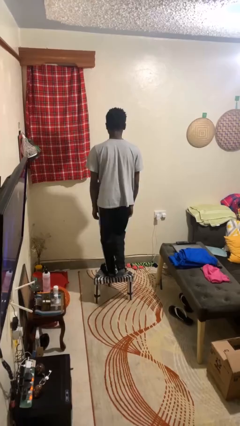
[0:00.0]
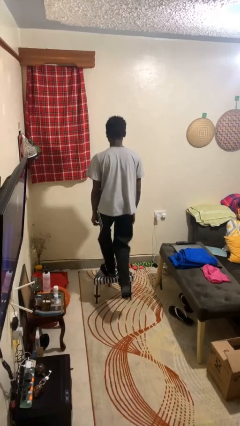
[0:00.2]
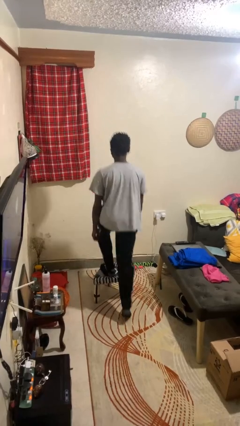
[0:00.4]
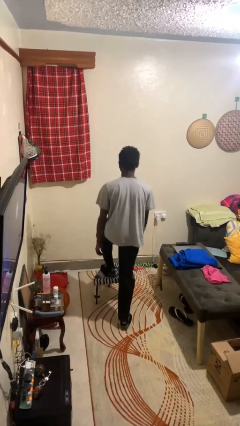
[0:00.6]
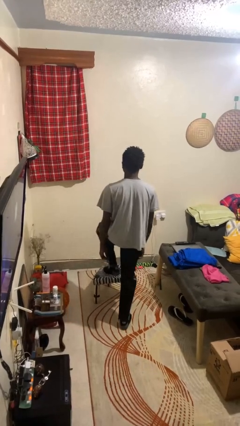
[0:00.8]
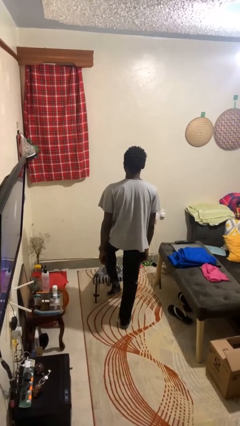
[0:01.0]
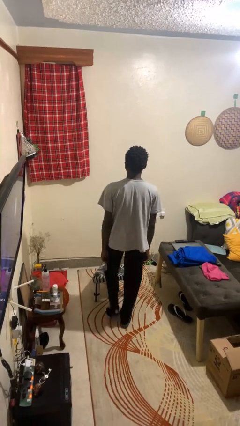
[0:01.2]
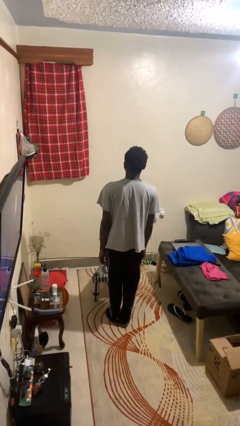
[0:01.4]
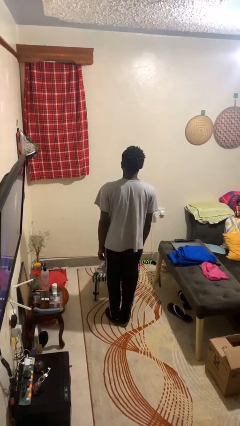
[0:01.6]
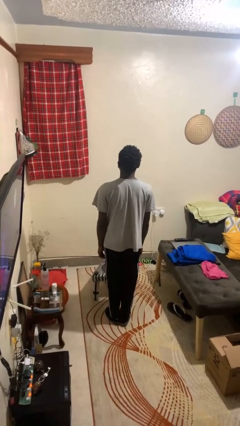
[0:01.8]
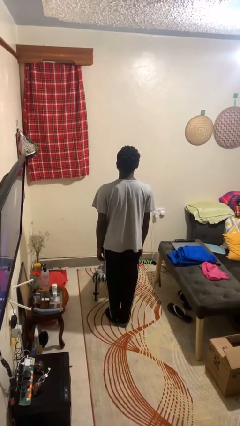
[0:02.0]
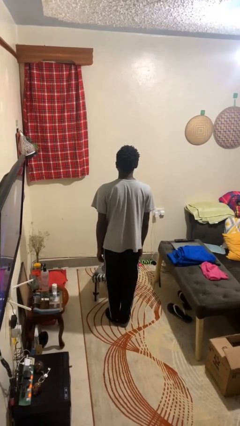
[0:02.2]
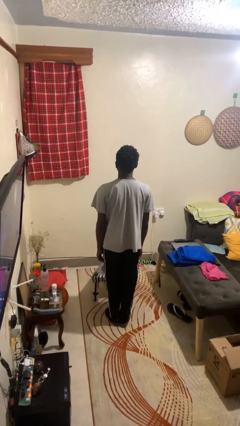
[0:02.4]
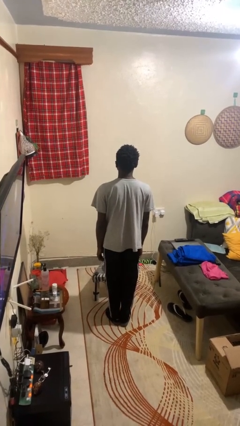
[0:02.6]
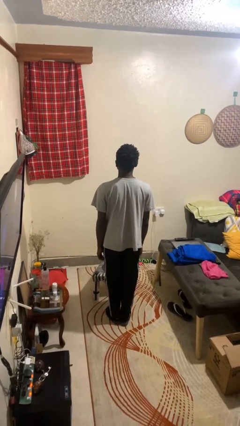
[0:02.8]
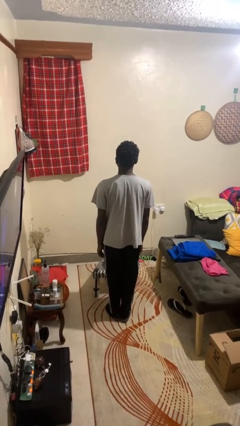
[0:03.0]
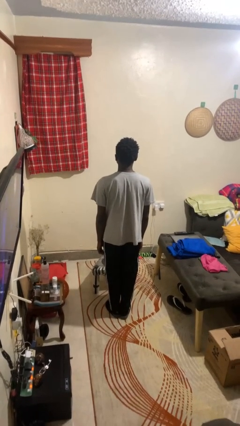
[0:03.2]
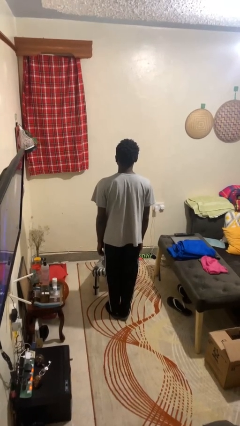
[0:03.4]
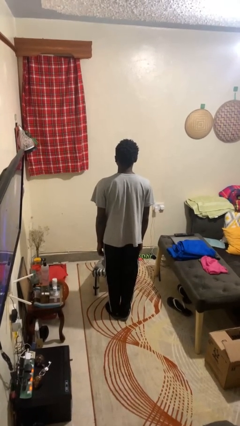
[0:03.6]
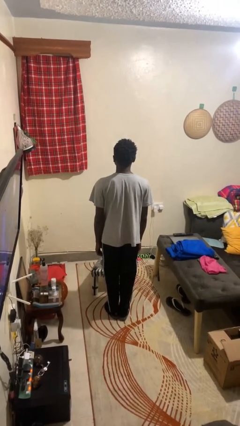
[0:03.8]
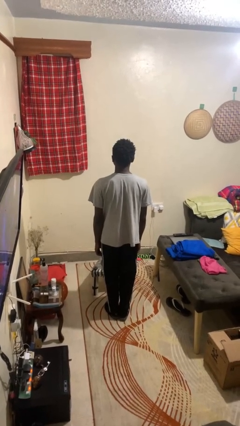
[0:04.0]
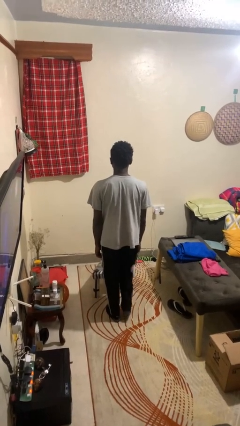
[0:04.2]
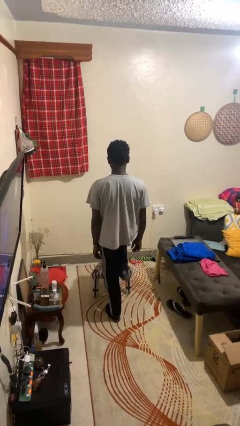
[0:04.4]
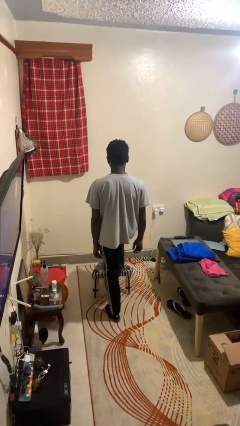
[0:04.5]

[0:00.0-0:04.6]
person climbs off chair

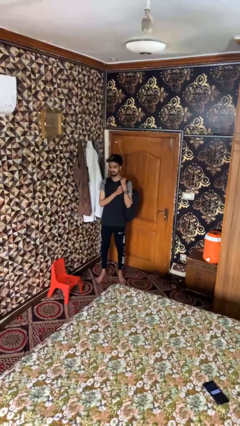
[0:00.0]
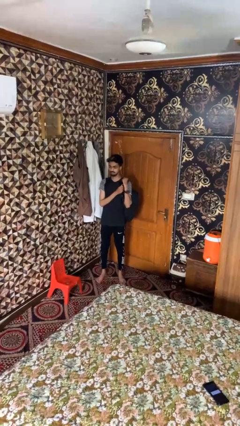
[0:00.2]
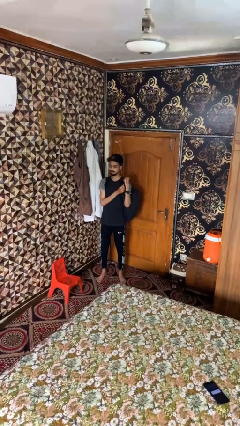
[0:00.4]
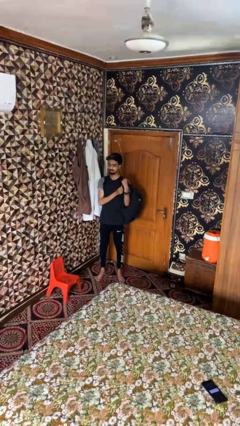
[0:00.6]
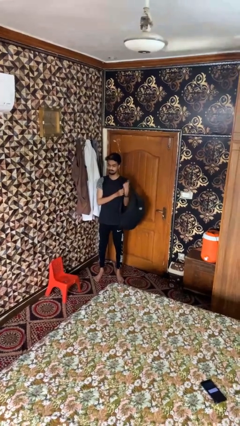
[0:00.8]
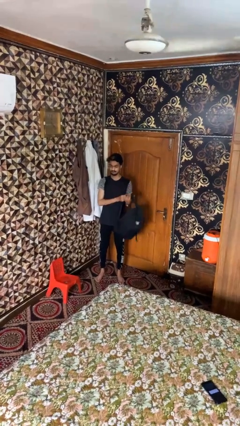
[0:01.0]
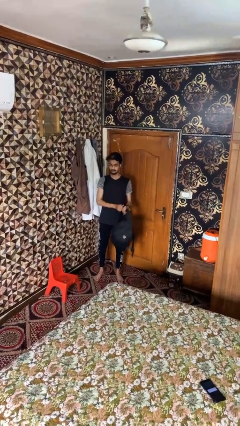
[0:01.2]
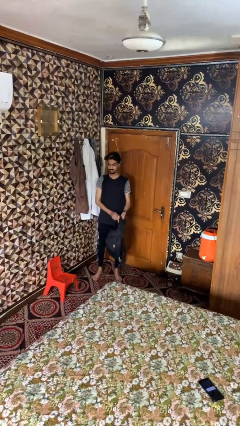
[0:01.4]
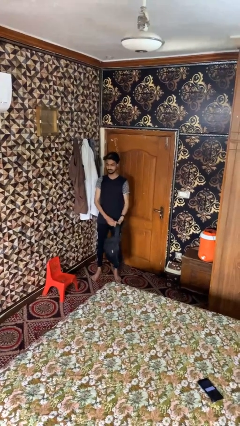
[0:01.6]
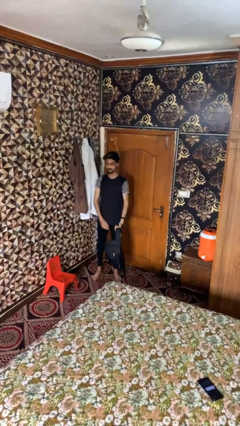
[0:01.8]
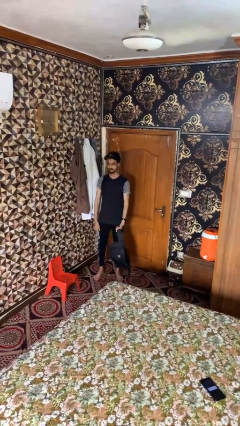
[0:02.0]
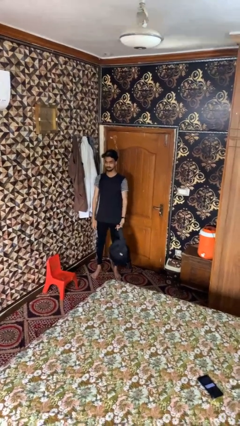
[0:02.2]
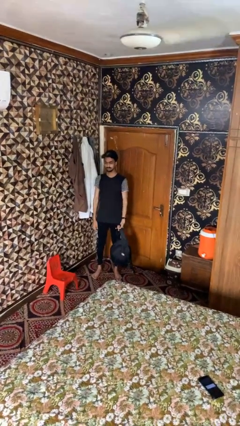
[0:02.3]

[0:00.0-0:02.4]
person takes off backpack

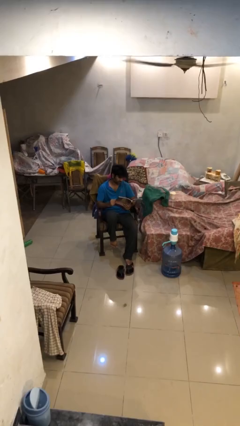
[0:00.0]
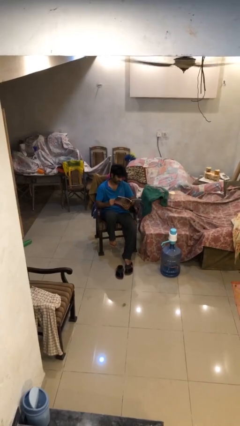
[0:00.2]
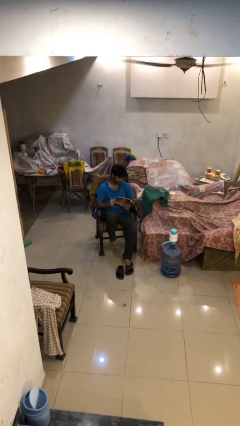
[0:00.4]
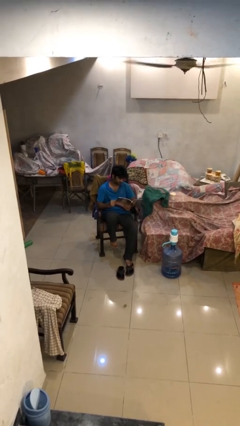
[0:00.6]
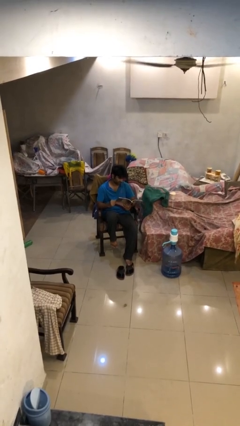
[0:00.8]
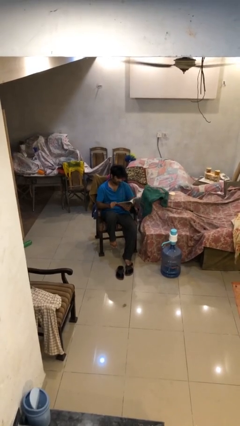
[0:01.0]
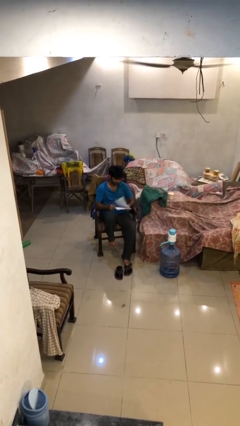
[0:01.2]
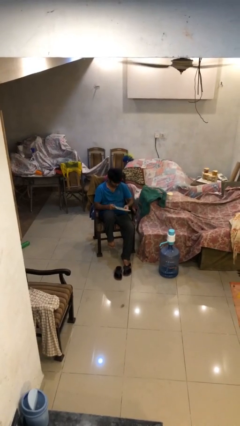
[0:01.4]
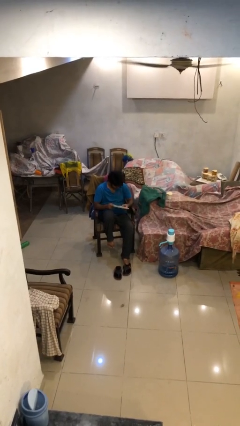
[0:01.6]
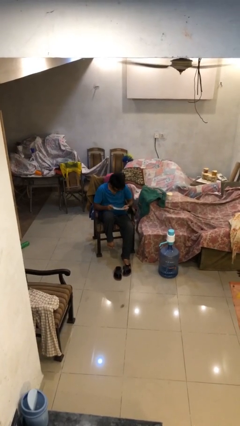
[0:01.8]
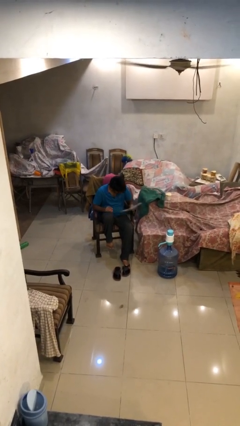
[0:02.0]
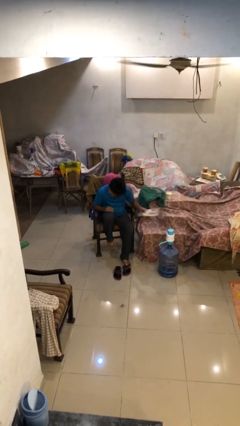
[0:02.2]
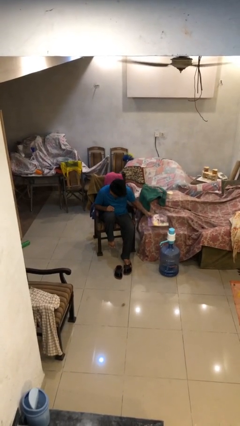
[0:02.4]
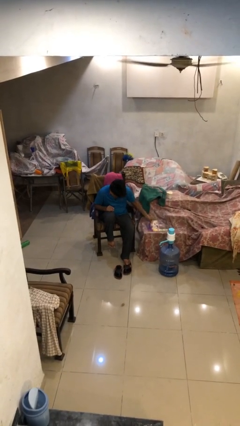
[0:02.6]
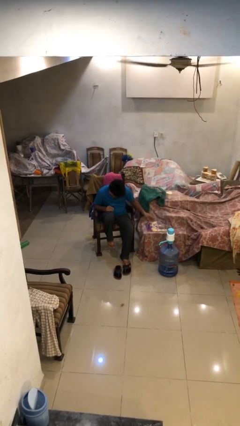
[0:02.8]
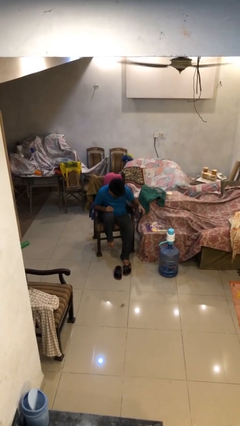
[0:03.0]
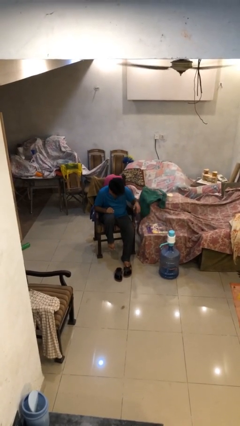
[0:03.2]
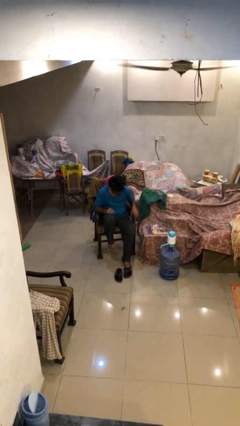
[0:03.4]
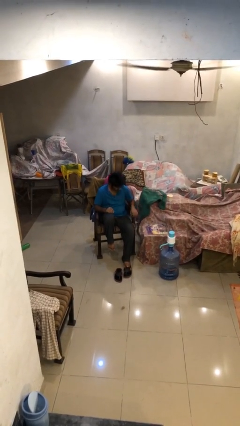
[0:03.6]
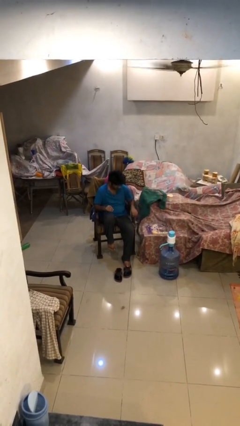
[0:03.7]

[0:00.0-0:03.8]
person puts down object on table

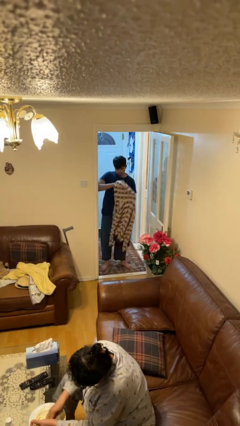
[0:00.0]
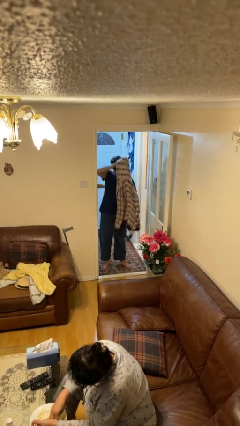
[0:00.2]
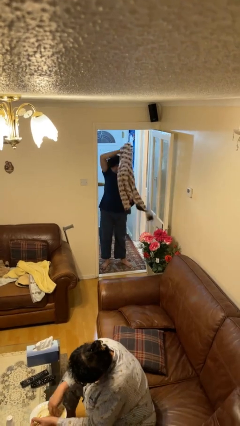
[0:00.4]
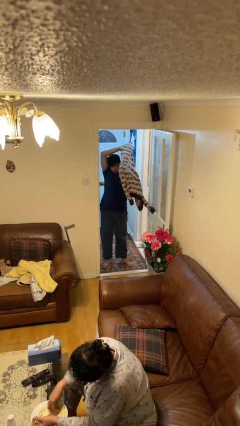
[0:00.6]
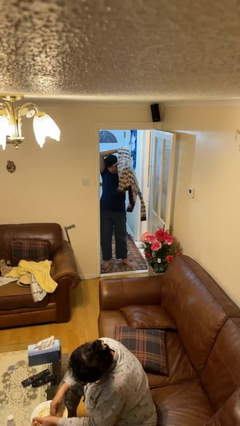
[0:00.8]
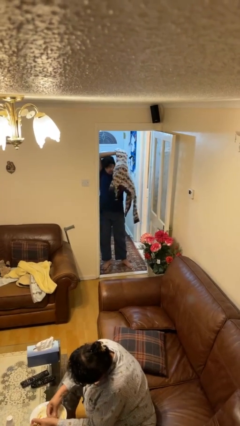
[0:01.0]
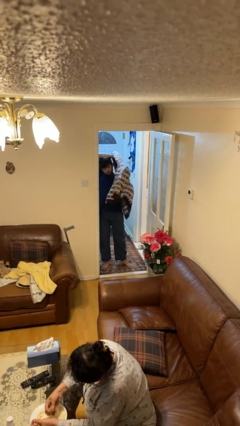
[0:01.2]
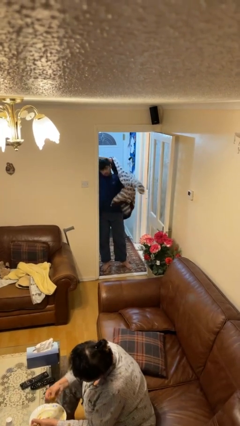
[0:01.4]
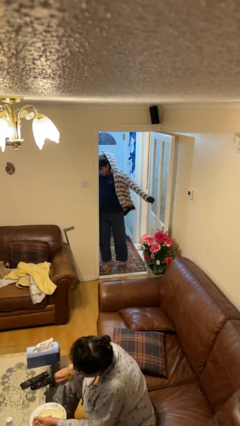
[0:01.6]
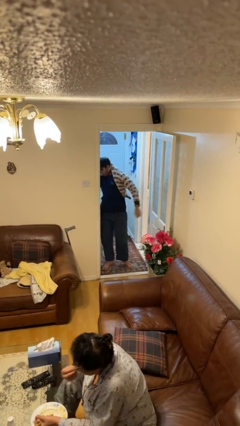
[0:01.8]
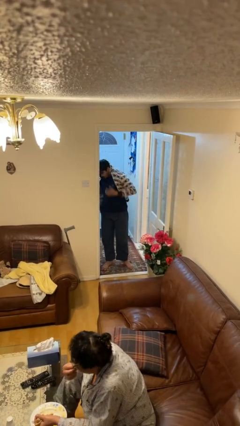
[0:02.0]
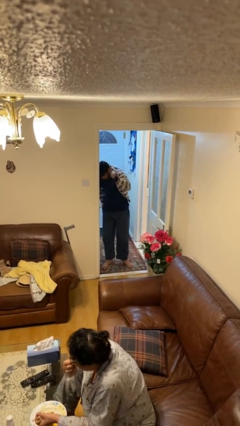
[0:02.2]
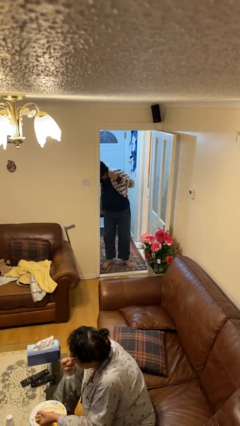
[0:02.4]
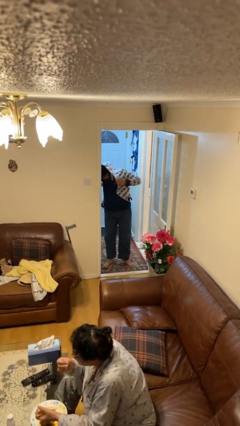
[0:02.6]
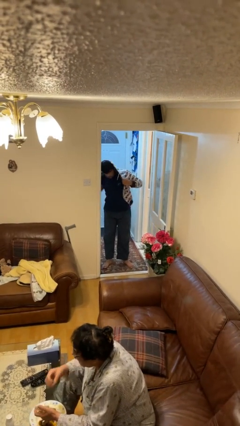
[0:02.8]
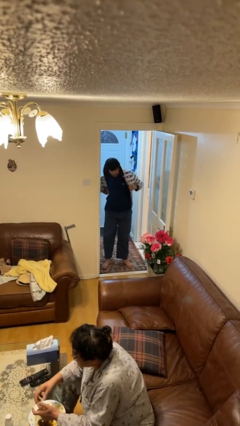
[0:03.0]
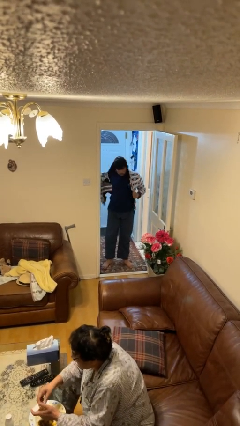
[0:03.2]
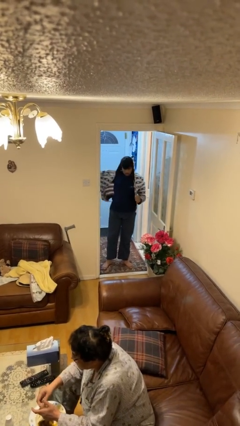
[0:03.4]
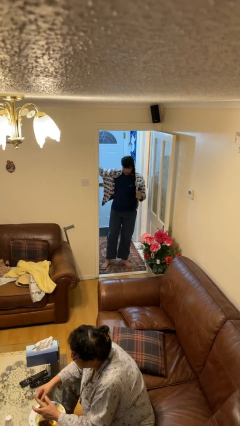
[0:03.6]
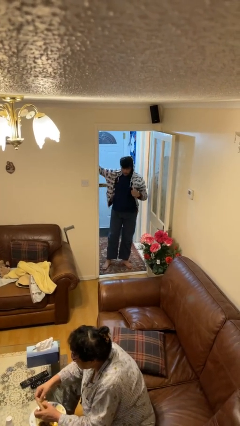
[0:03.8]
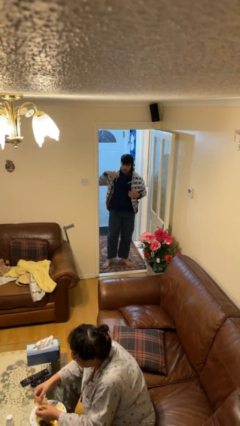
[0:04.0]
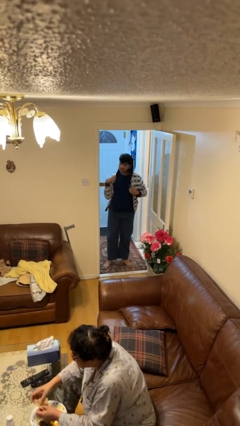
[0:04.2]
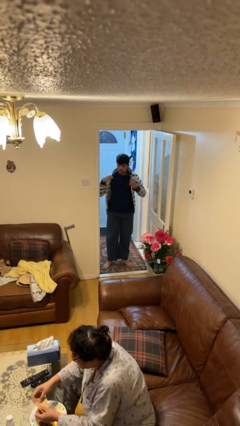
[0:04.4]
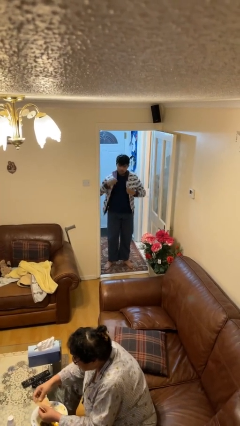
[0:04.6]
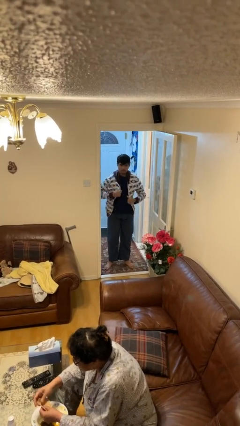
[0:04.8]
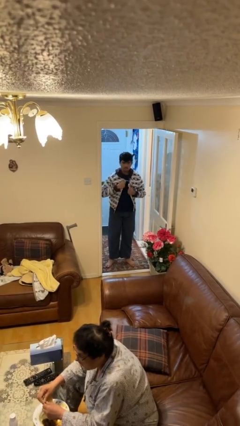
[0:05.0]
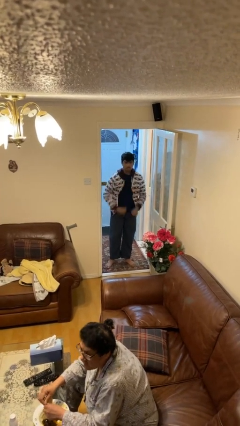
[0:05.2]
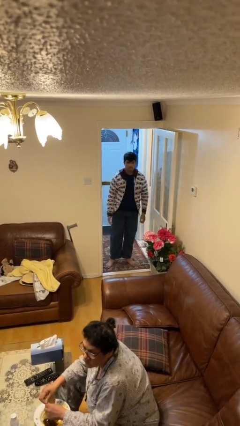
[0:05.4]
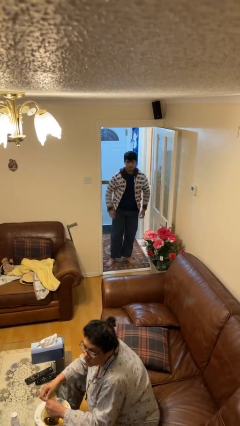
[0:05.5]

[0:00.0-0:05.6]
person puts on hoodie

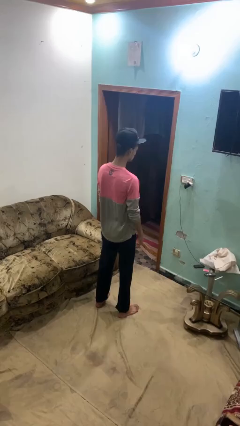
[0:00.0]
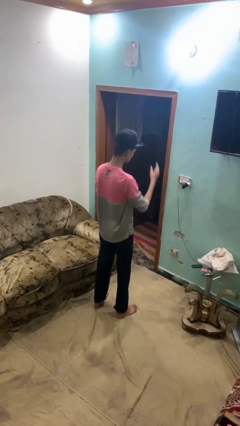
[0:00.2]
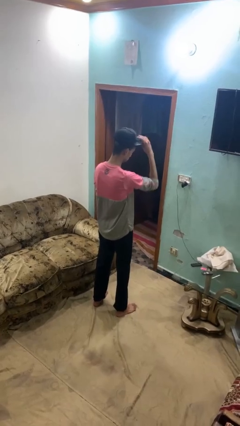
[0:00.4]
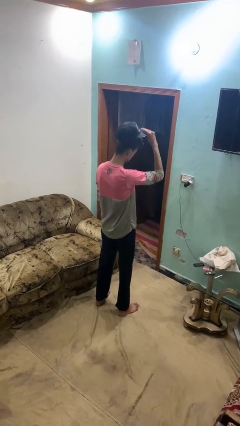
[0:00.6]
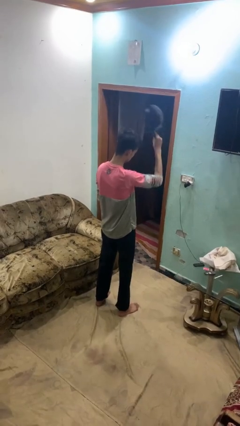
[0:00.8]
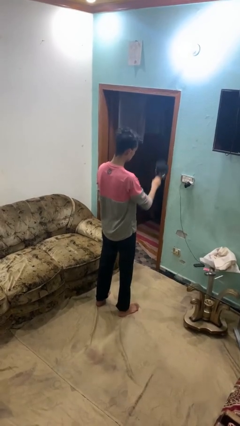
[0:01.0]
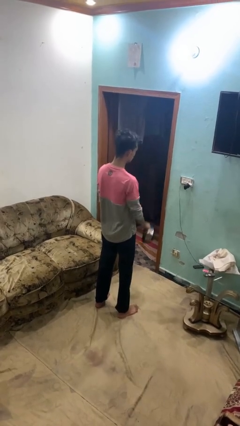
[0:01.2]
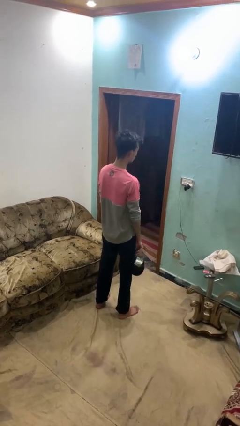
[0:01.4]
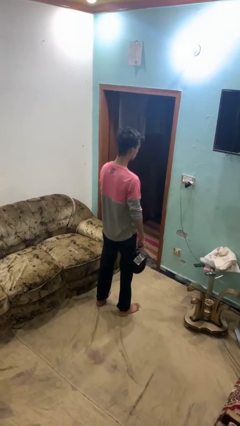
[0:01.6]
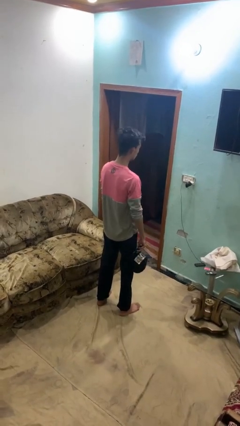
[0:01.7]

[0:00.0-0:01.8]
person takes off hat
